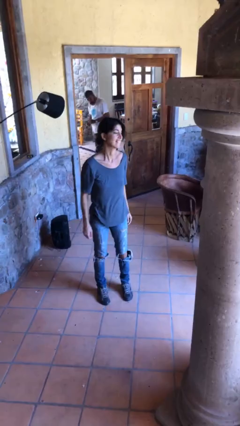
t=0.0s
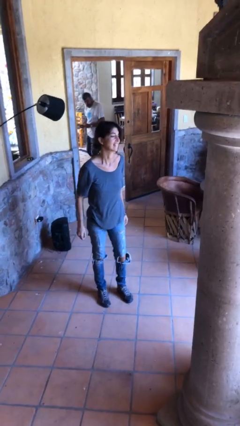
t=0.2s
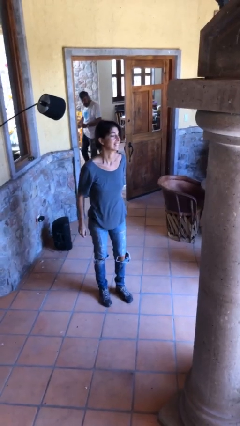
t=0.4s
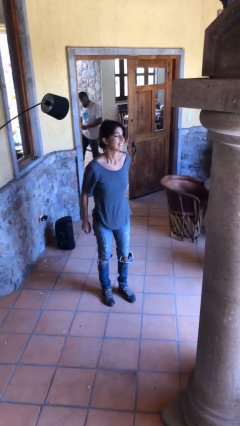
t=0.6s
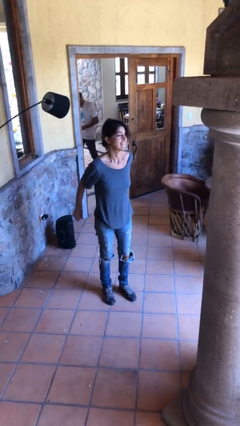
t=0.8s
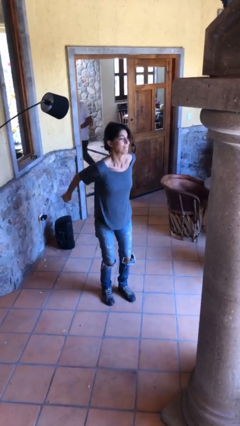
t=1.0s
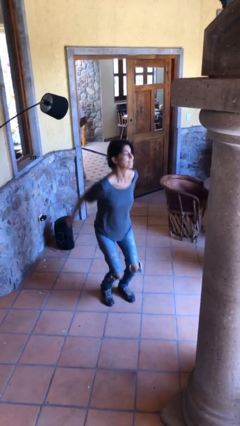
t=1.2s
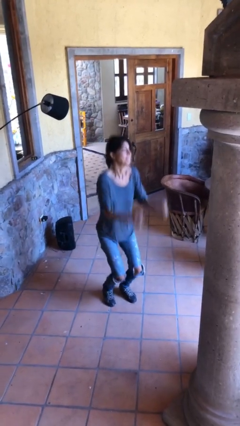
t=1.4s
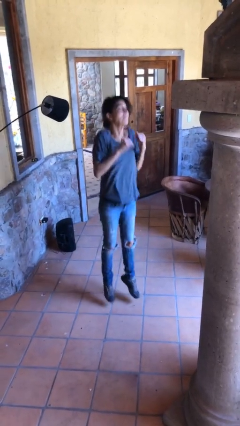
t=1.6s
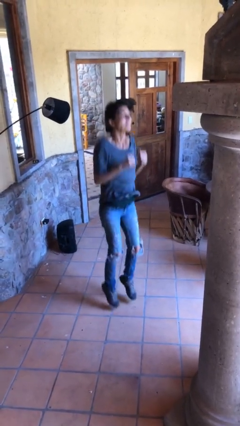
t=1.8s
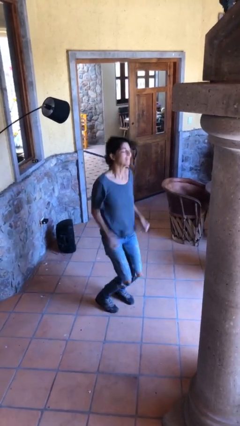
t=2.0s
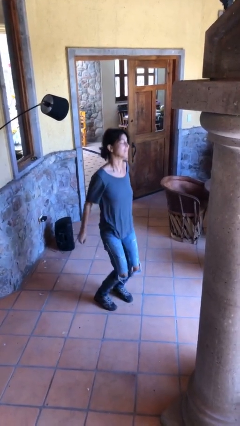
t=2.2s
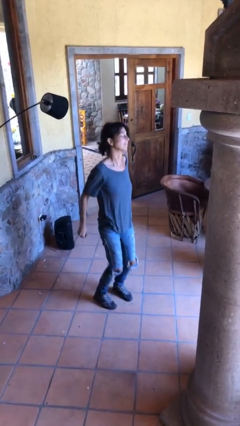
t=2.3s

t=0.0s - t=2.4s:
person jumps

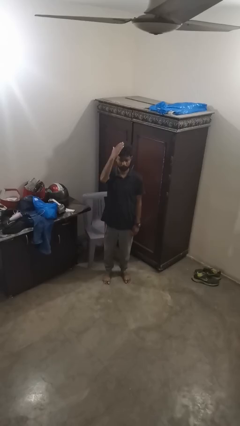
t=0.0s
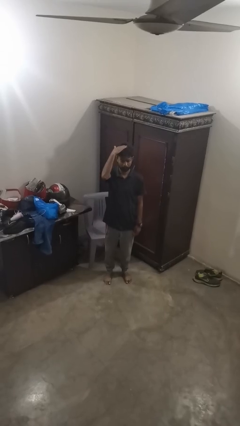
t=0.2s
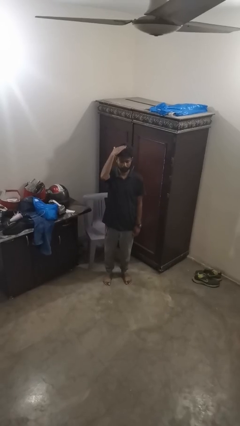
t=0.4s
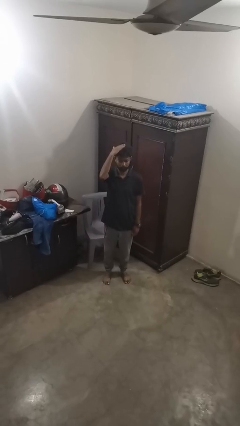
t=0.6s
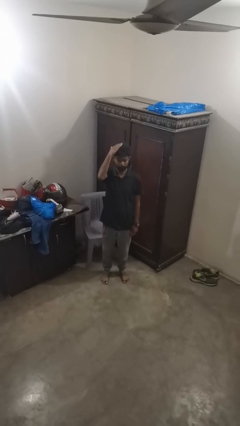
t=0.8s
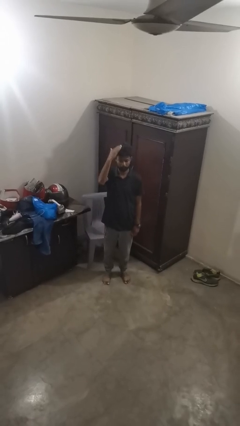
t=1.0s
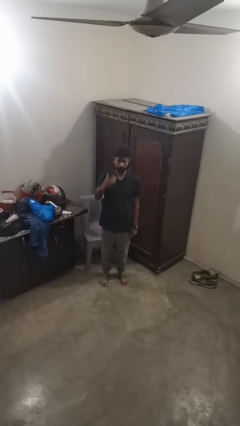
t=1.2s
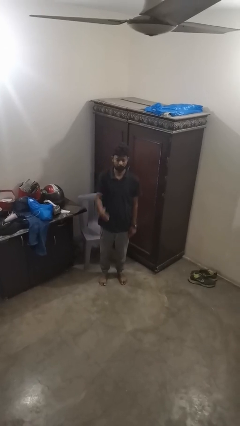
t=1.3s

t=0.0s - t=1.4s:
person pats head

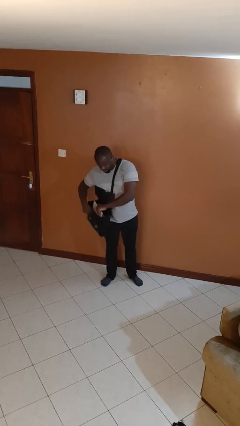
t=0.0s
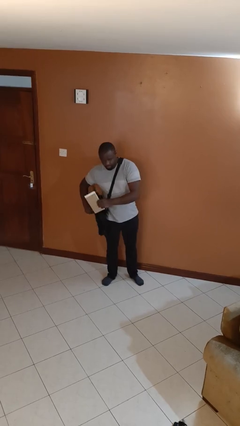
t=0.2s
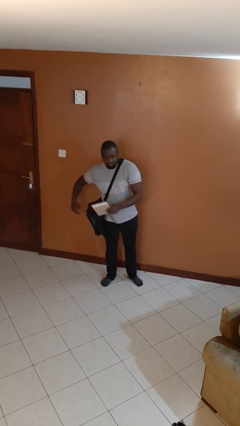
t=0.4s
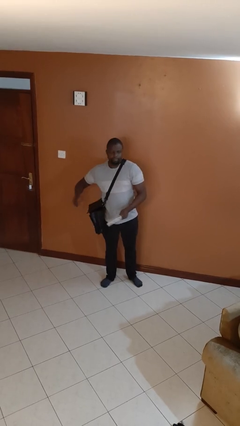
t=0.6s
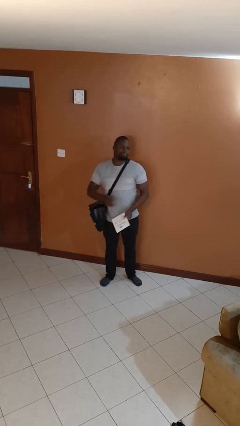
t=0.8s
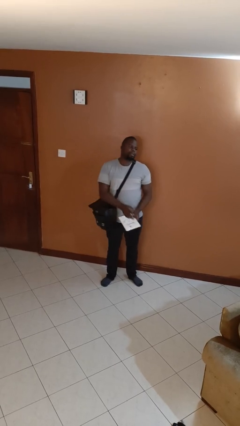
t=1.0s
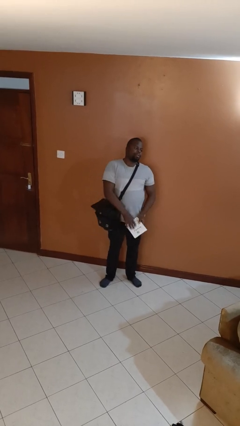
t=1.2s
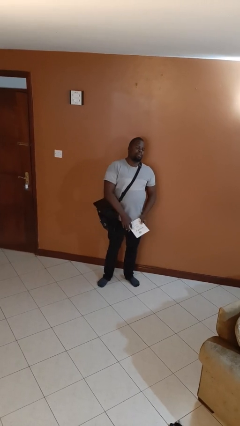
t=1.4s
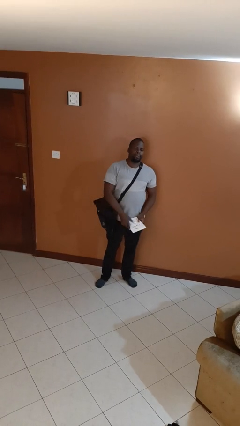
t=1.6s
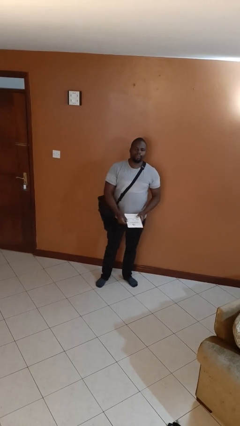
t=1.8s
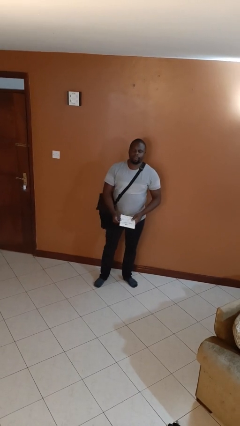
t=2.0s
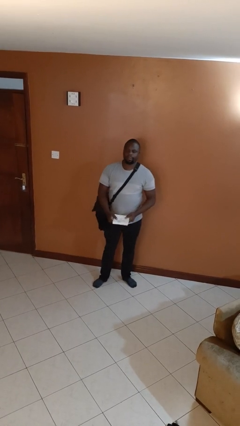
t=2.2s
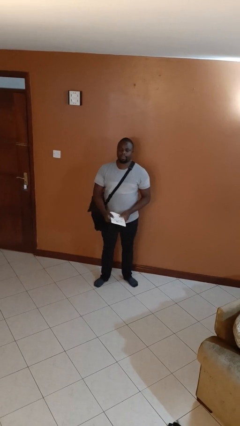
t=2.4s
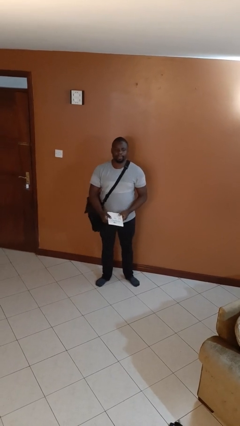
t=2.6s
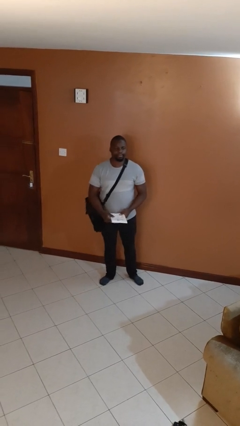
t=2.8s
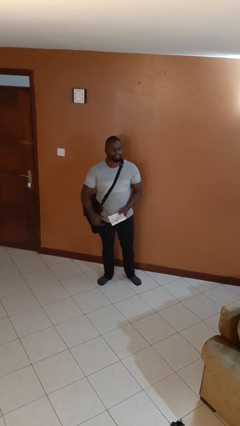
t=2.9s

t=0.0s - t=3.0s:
person takes object from purse

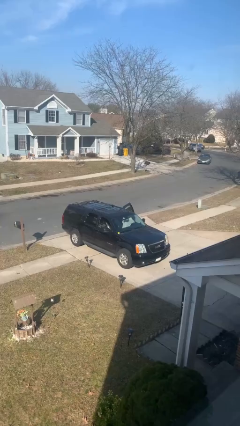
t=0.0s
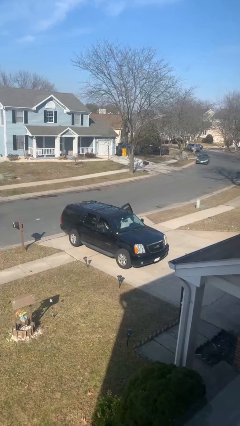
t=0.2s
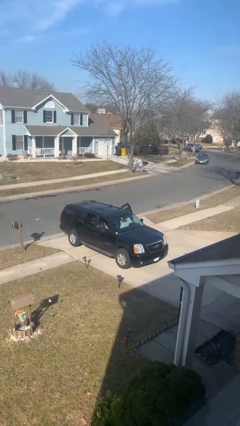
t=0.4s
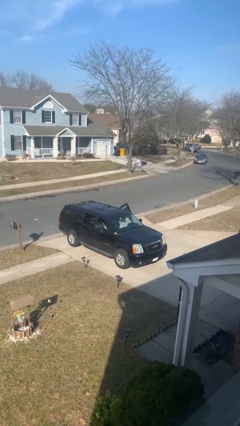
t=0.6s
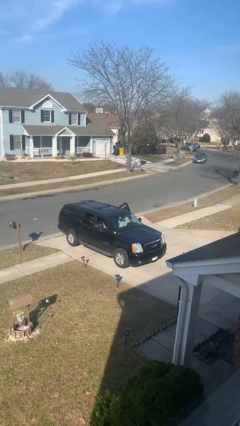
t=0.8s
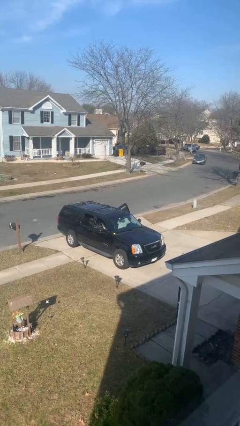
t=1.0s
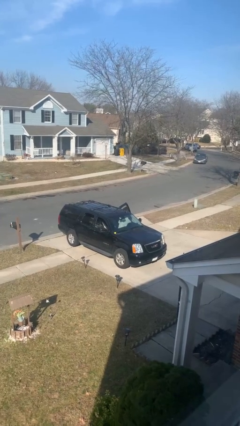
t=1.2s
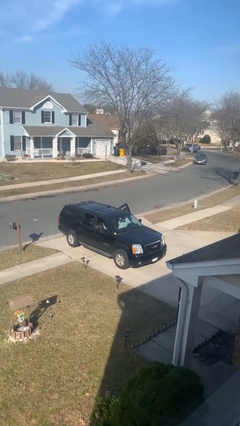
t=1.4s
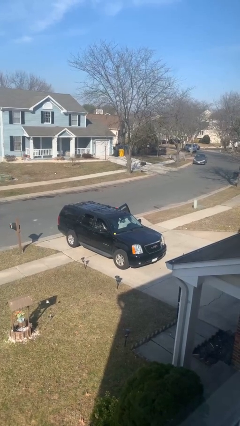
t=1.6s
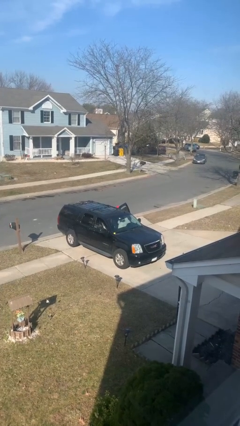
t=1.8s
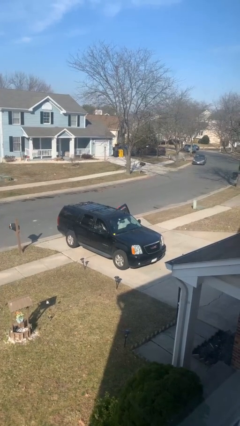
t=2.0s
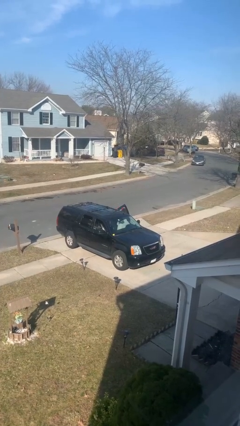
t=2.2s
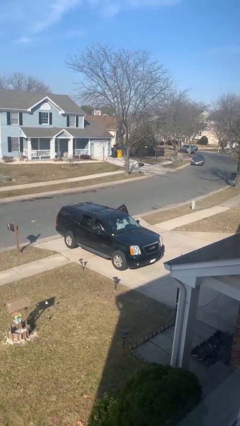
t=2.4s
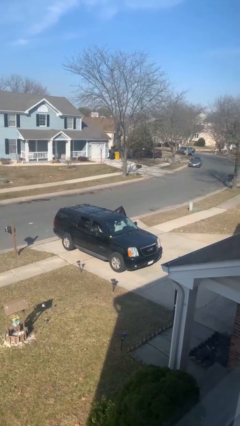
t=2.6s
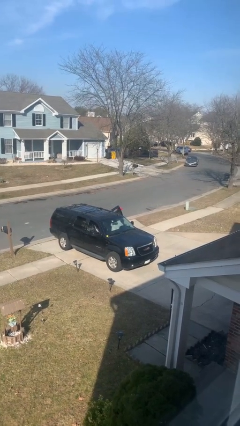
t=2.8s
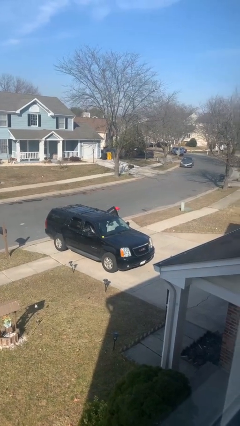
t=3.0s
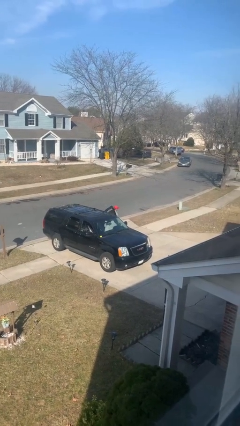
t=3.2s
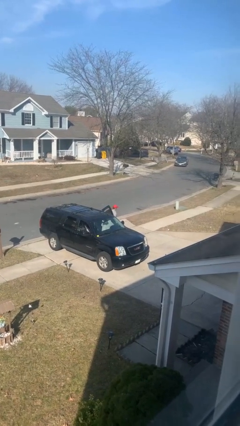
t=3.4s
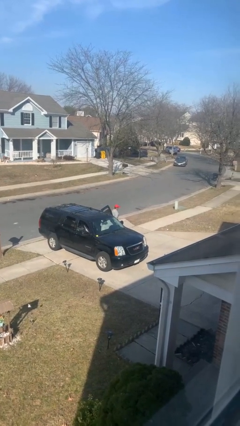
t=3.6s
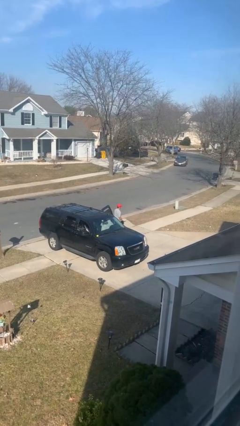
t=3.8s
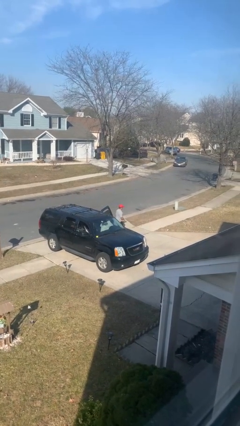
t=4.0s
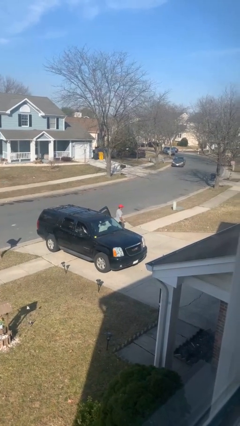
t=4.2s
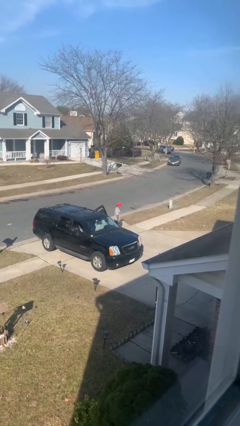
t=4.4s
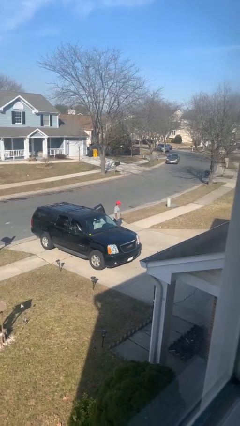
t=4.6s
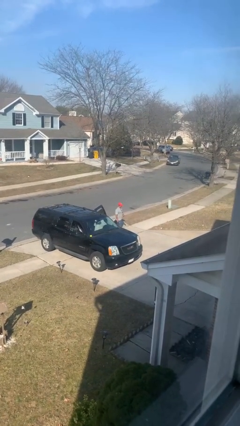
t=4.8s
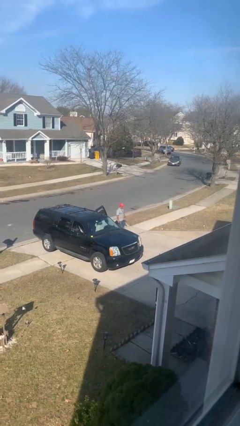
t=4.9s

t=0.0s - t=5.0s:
person exits car

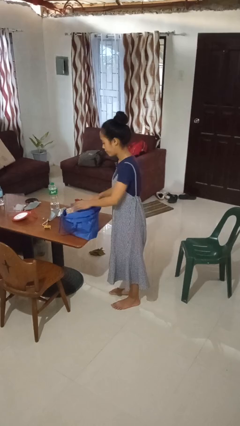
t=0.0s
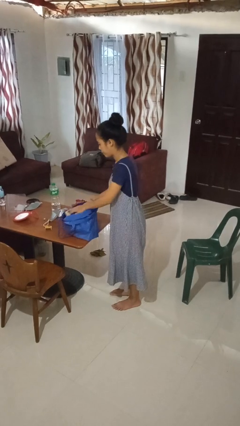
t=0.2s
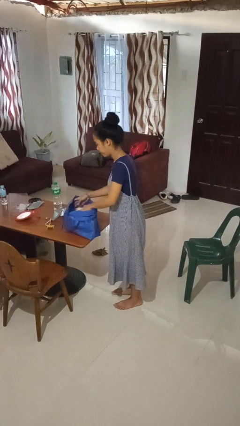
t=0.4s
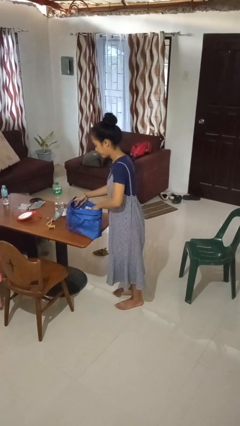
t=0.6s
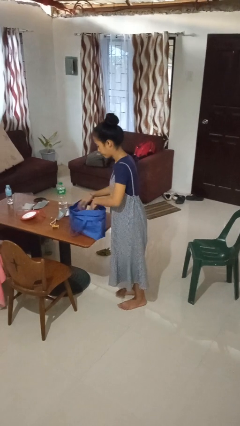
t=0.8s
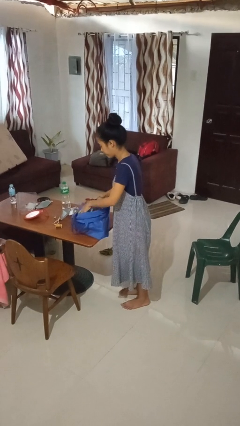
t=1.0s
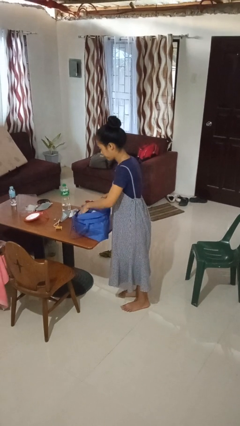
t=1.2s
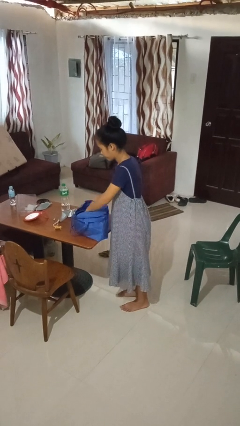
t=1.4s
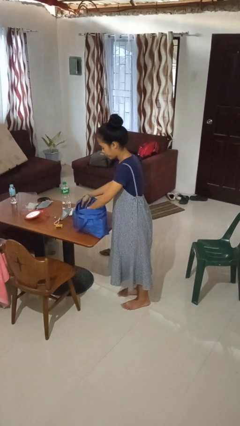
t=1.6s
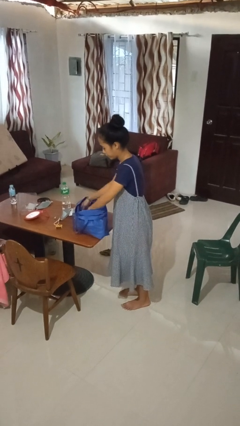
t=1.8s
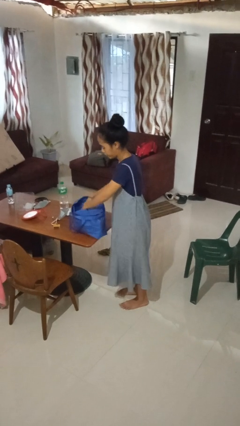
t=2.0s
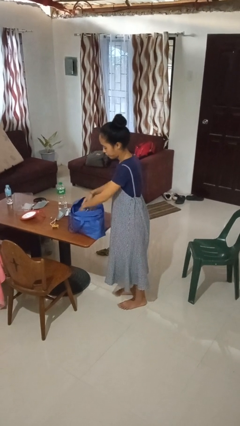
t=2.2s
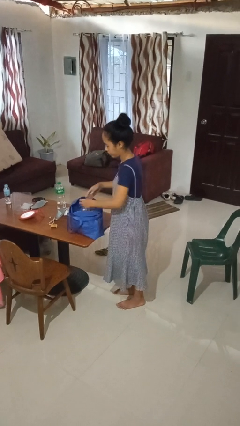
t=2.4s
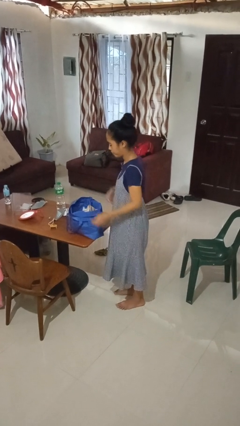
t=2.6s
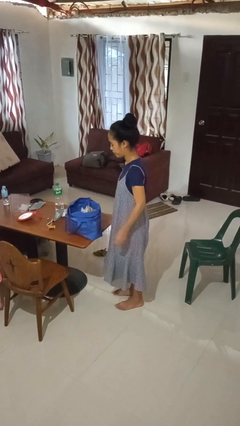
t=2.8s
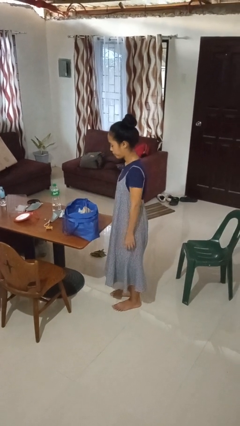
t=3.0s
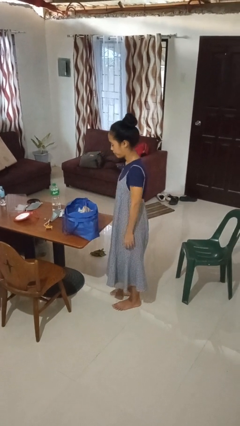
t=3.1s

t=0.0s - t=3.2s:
person searches in bag

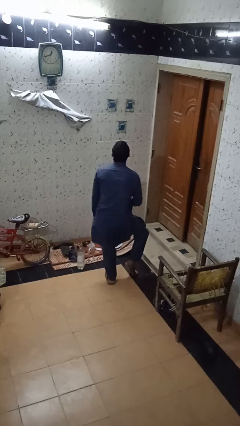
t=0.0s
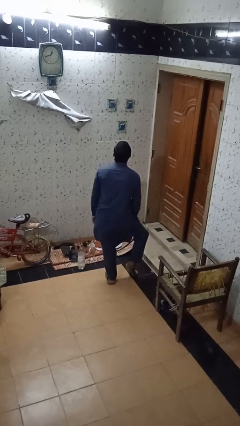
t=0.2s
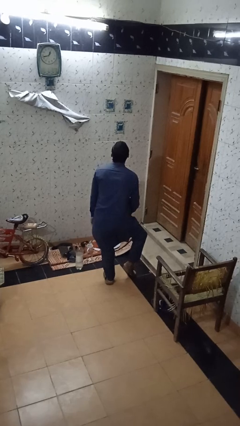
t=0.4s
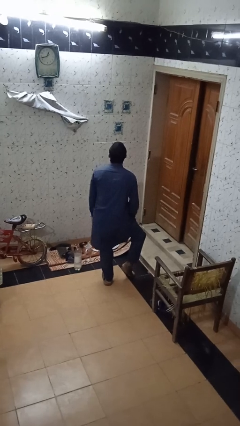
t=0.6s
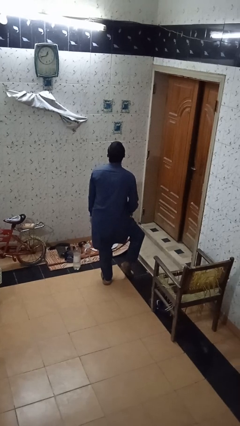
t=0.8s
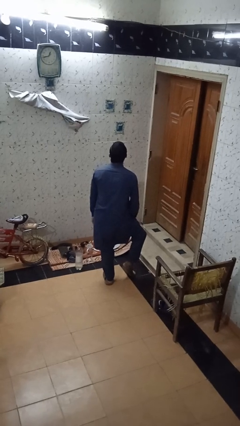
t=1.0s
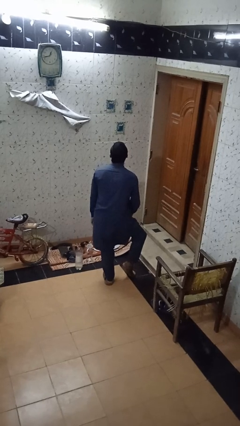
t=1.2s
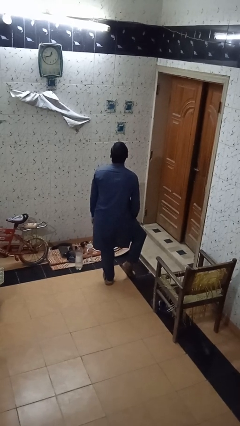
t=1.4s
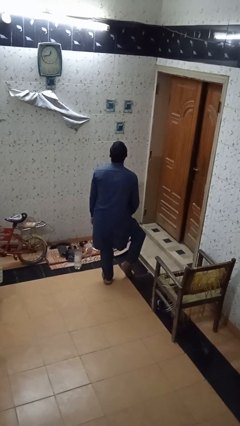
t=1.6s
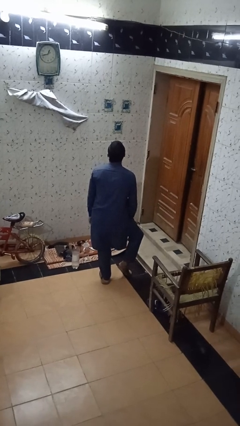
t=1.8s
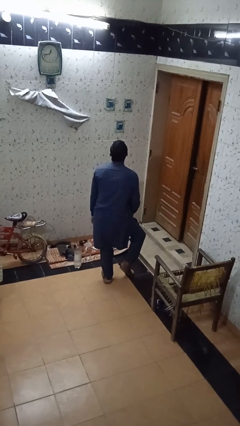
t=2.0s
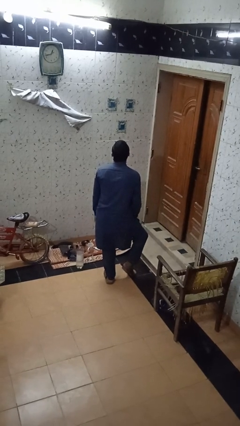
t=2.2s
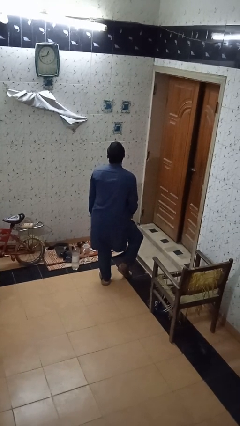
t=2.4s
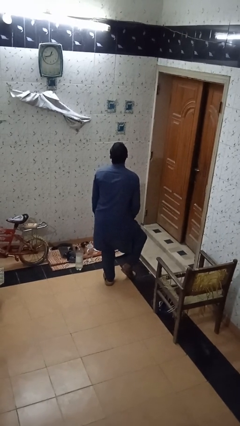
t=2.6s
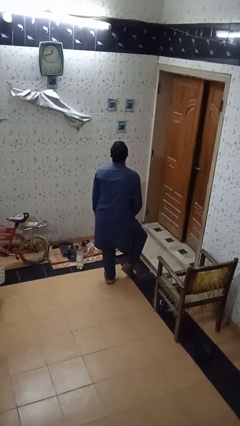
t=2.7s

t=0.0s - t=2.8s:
person slaps hands on thighs
